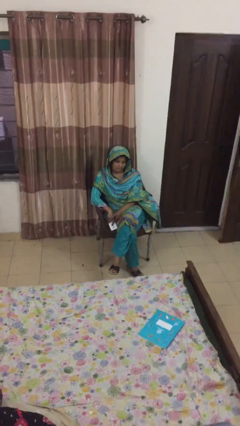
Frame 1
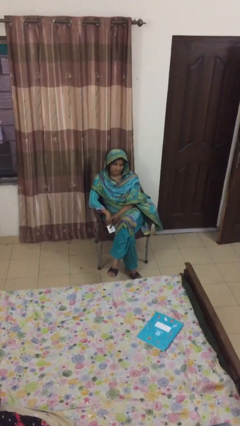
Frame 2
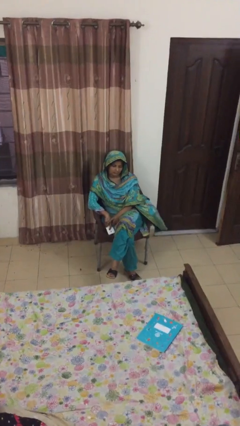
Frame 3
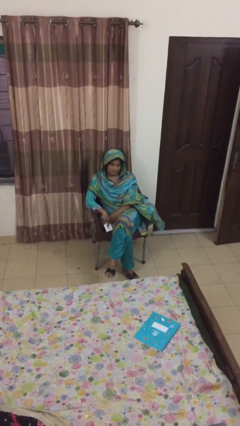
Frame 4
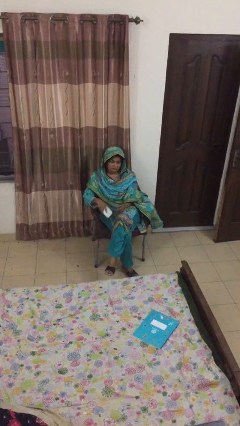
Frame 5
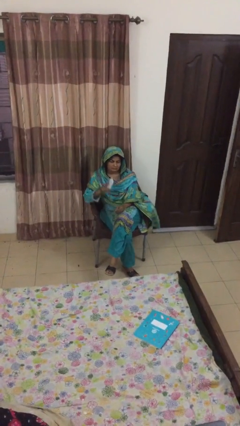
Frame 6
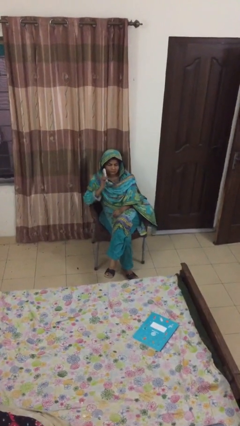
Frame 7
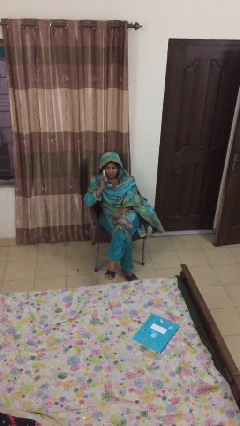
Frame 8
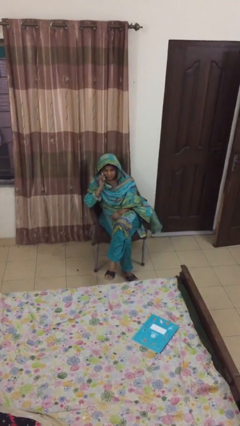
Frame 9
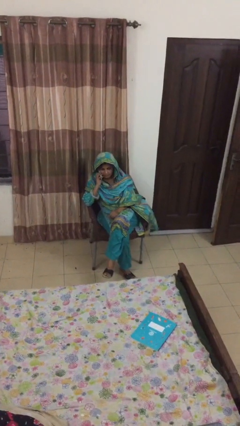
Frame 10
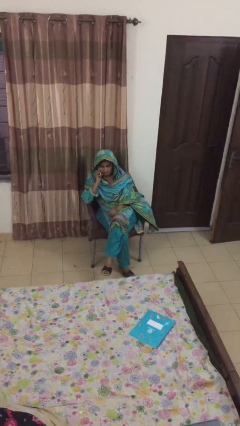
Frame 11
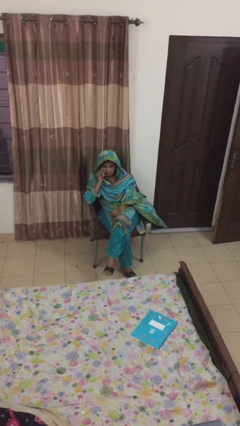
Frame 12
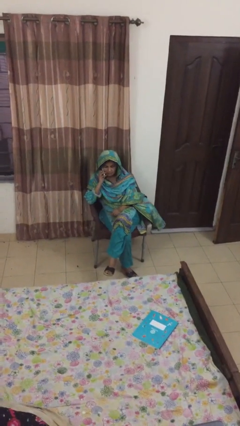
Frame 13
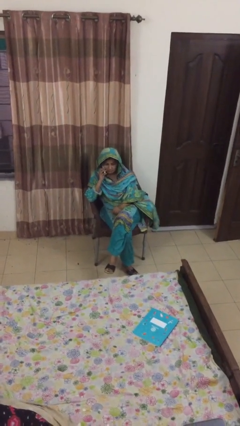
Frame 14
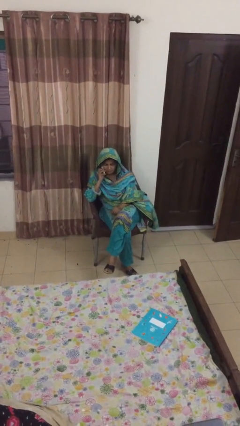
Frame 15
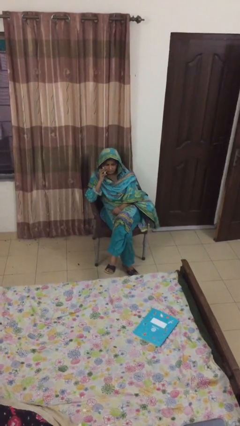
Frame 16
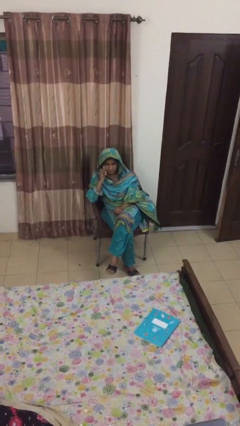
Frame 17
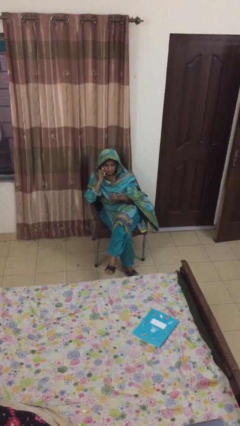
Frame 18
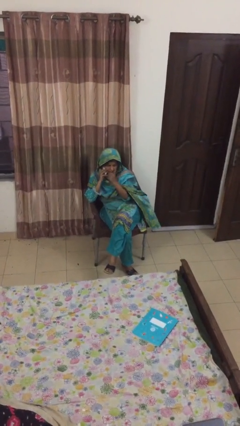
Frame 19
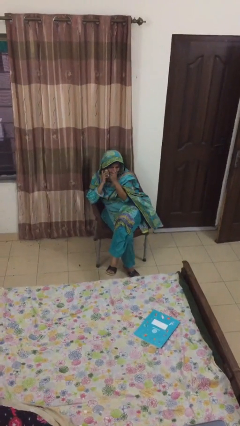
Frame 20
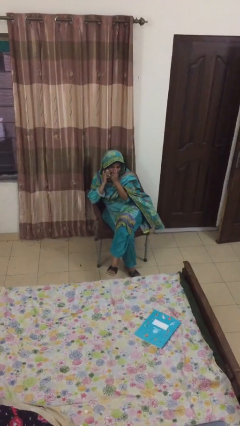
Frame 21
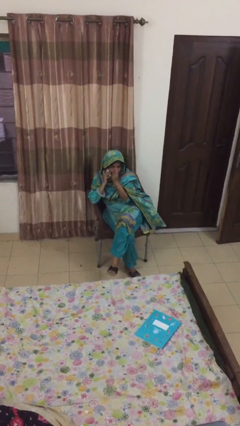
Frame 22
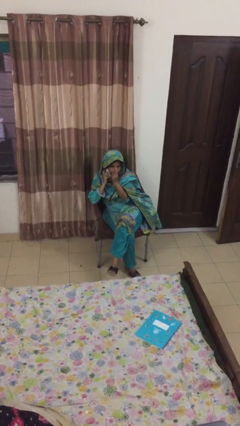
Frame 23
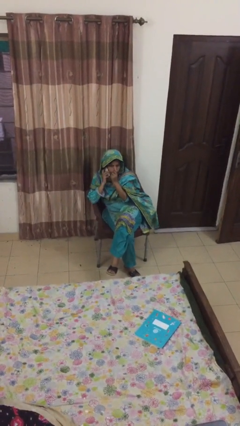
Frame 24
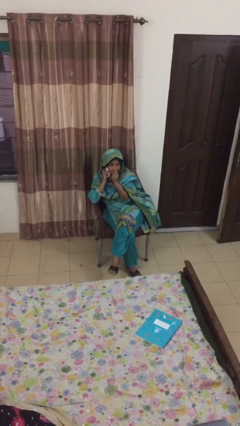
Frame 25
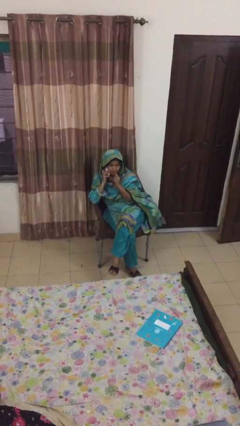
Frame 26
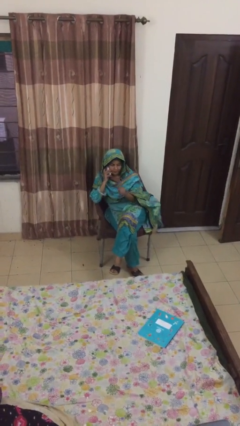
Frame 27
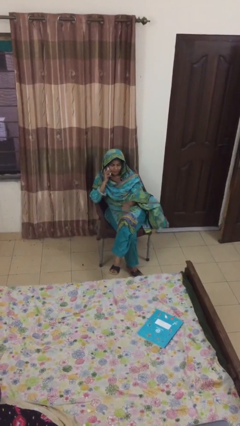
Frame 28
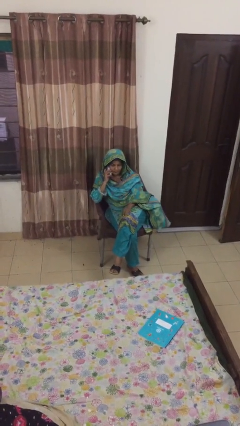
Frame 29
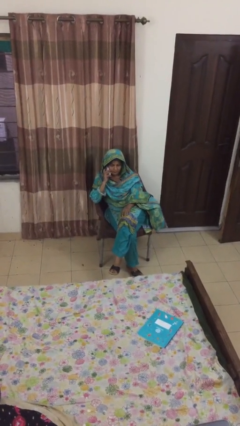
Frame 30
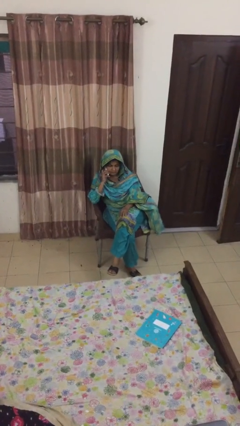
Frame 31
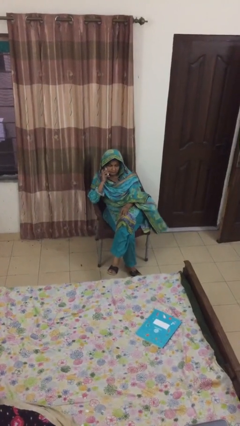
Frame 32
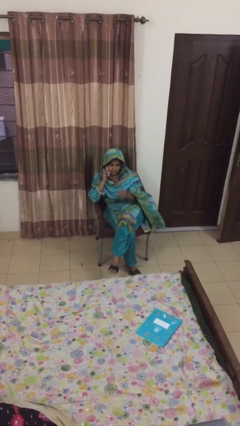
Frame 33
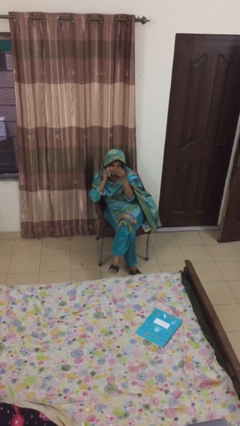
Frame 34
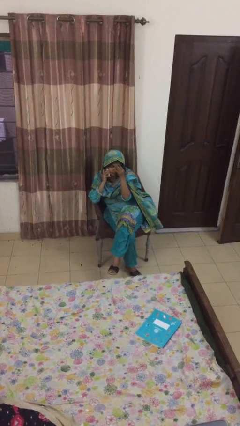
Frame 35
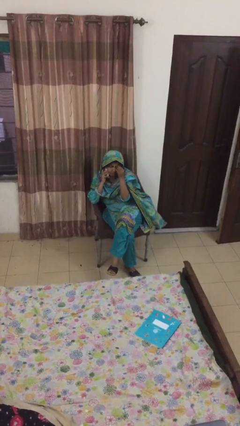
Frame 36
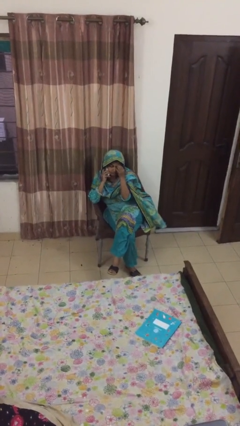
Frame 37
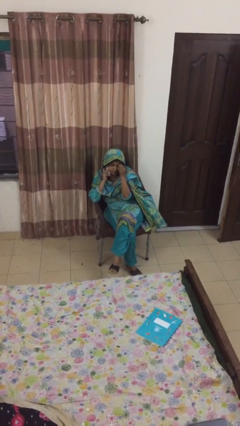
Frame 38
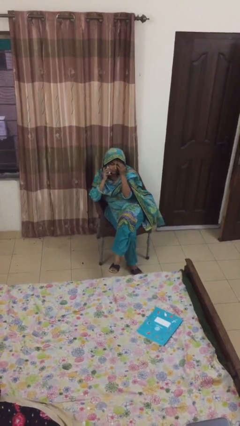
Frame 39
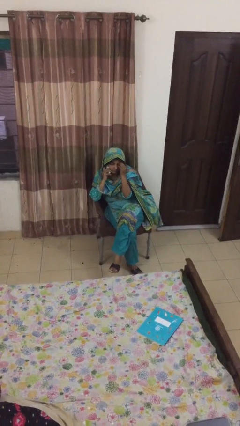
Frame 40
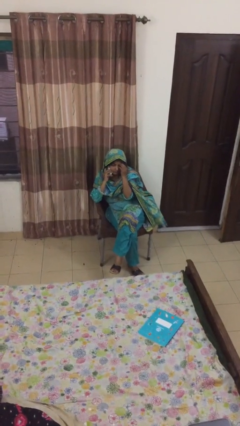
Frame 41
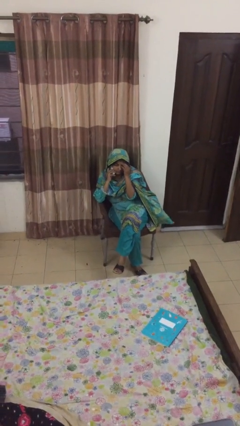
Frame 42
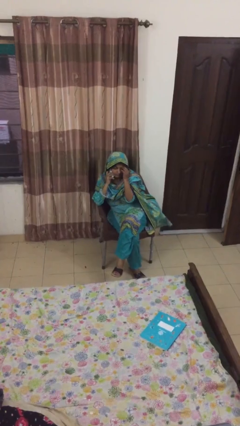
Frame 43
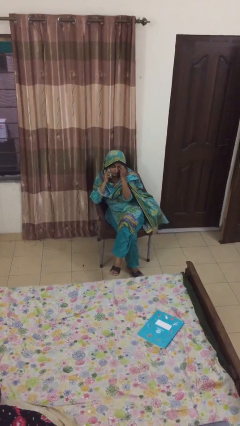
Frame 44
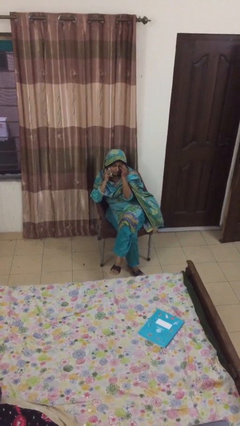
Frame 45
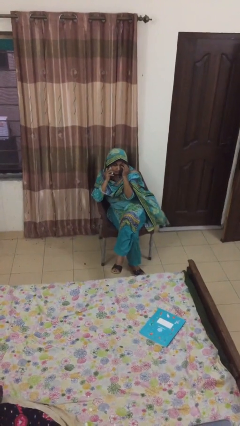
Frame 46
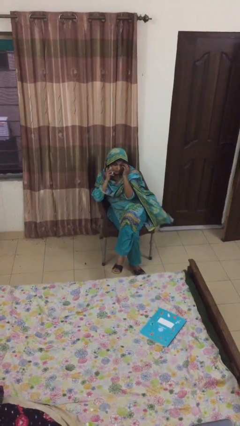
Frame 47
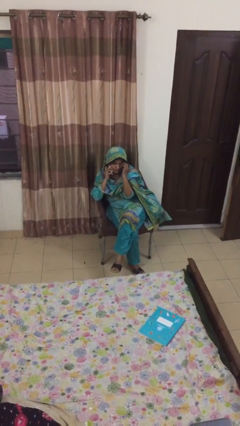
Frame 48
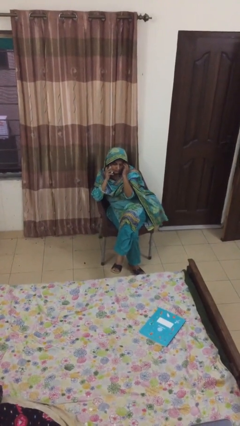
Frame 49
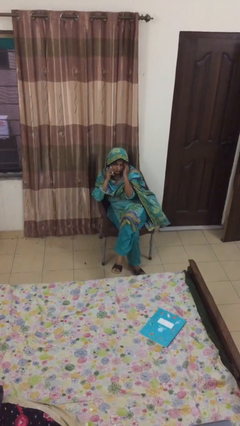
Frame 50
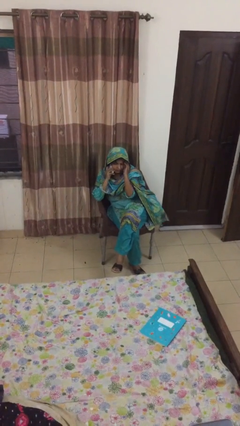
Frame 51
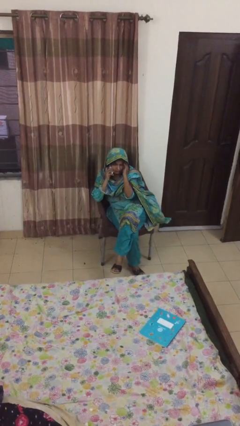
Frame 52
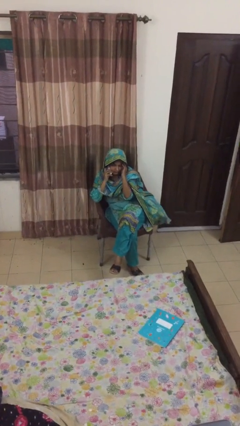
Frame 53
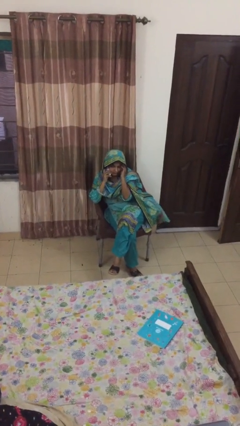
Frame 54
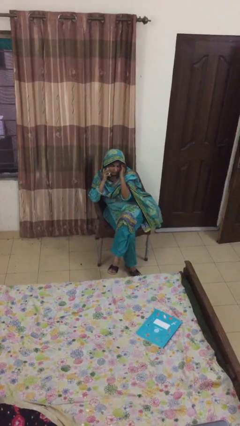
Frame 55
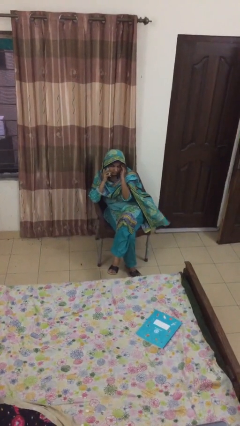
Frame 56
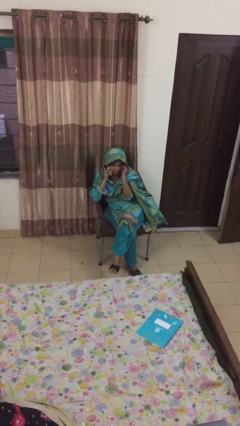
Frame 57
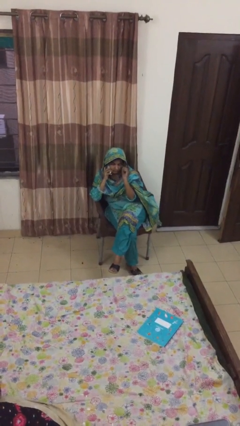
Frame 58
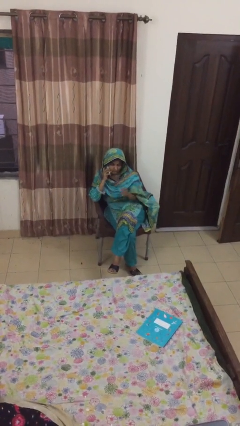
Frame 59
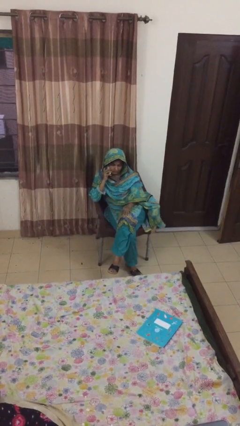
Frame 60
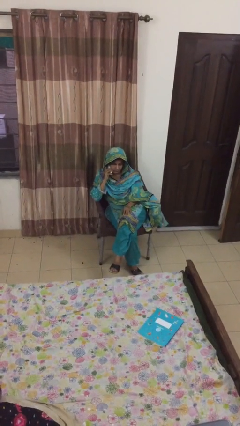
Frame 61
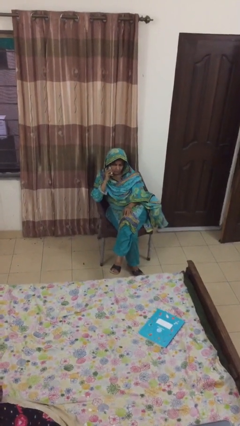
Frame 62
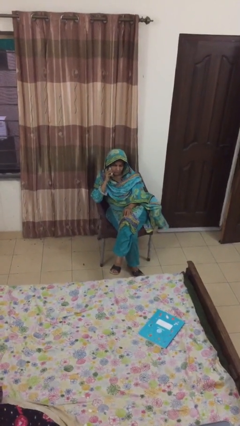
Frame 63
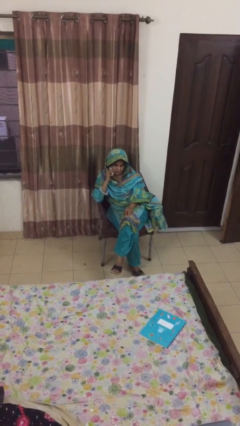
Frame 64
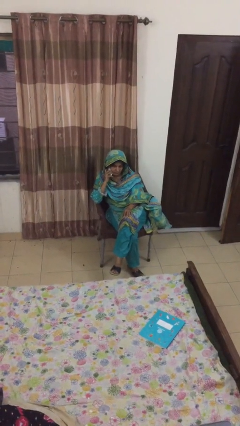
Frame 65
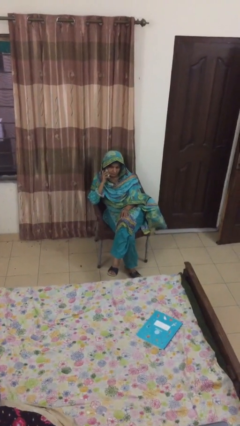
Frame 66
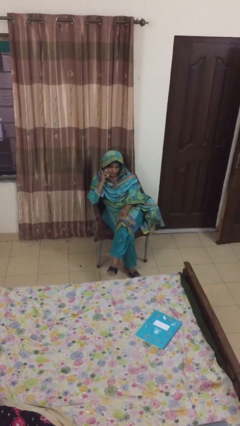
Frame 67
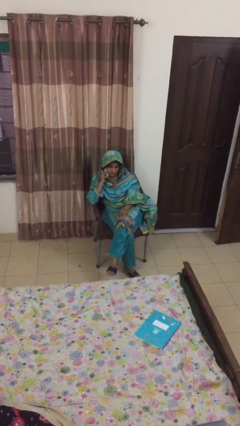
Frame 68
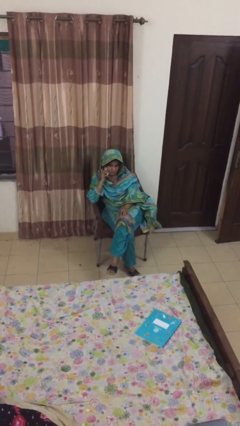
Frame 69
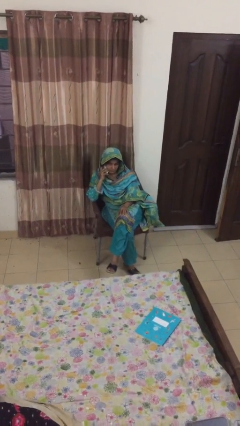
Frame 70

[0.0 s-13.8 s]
person talks on phone

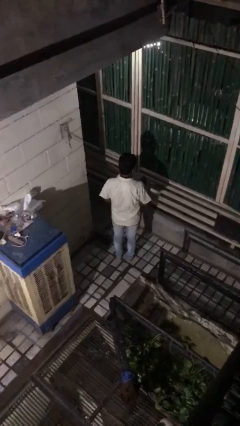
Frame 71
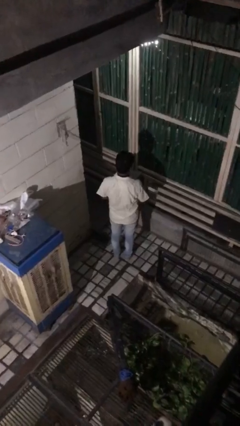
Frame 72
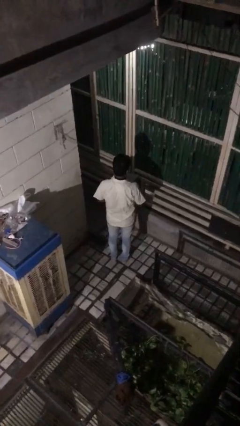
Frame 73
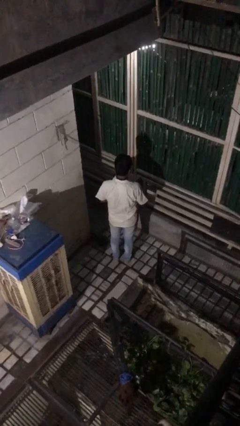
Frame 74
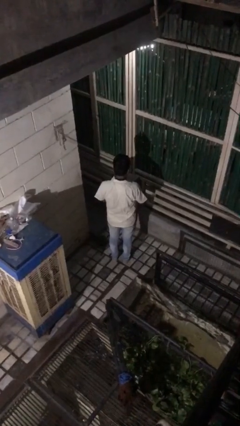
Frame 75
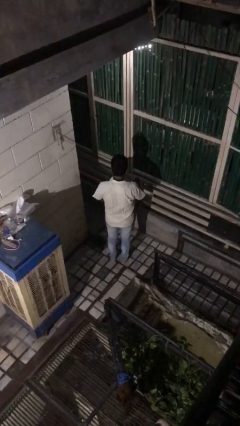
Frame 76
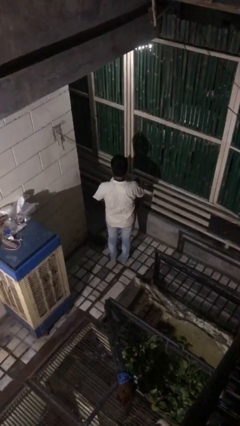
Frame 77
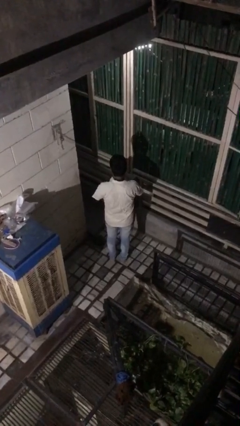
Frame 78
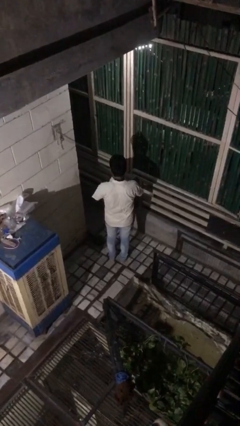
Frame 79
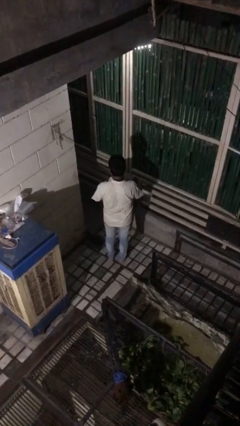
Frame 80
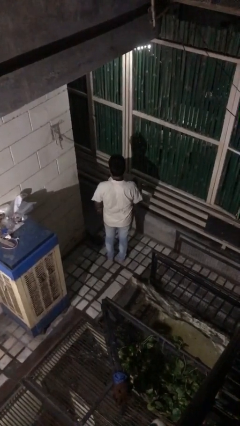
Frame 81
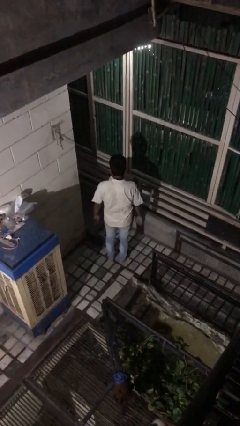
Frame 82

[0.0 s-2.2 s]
person puts on ring

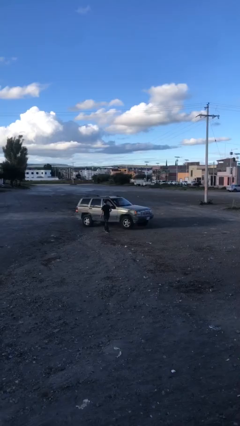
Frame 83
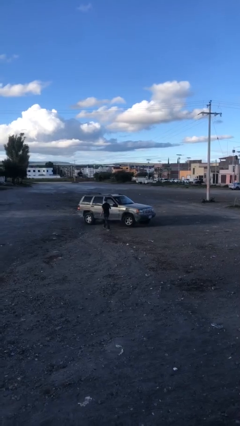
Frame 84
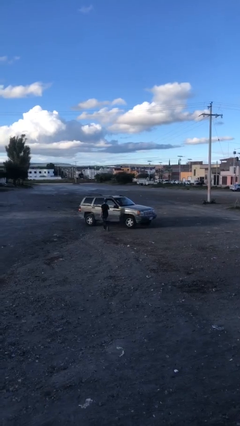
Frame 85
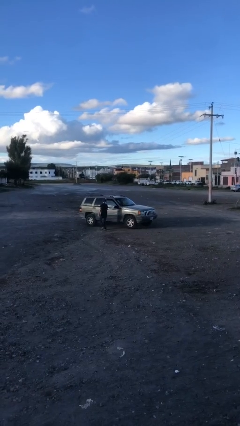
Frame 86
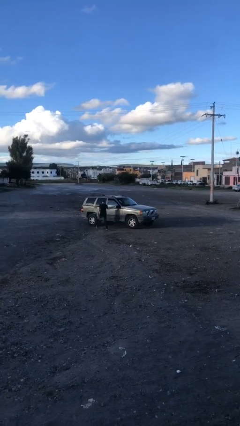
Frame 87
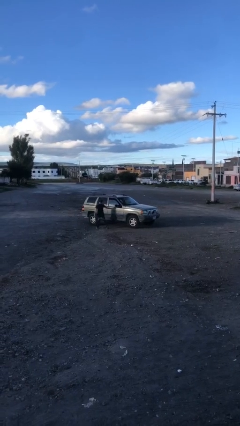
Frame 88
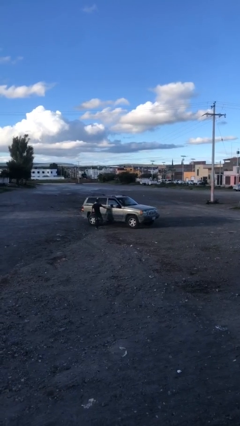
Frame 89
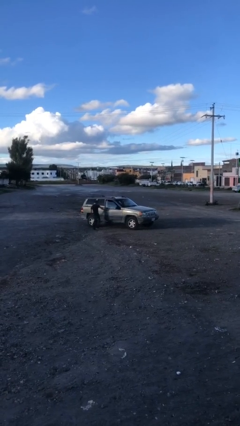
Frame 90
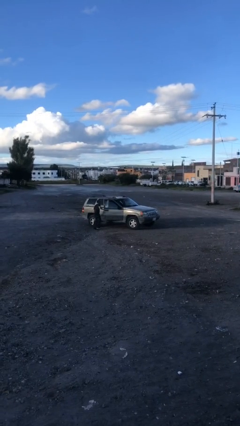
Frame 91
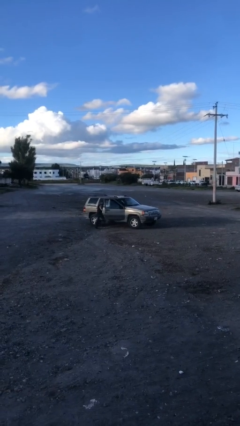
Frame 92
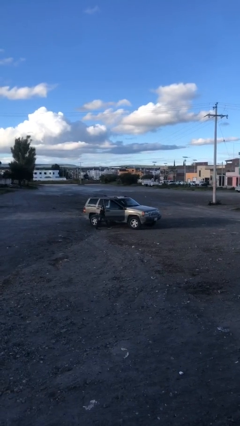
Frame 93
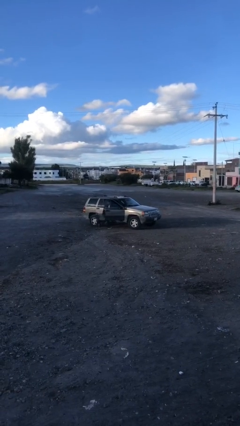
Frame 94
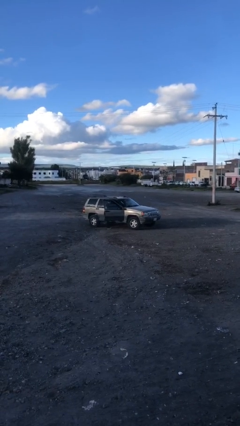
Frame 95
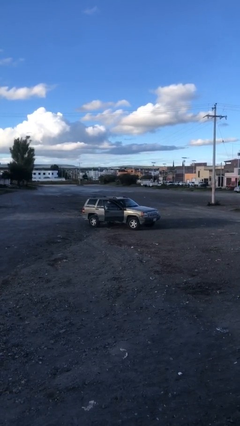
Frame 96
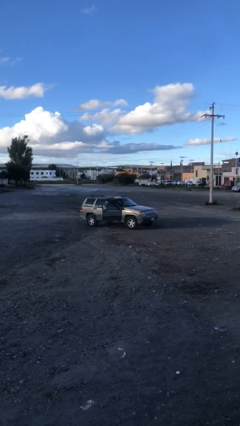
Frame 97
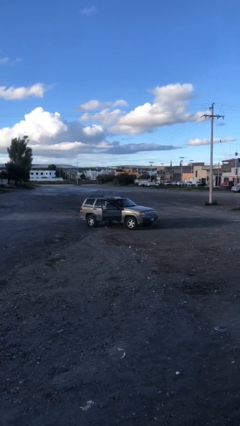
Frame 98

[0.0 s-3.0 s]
car picks up person
